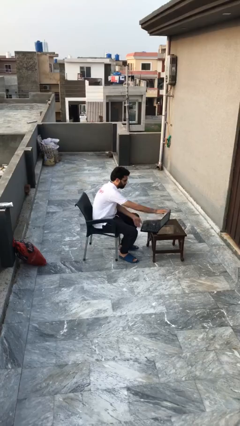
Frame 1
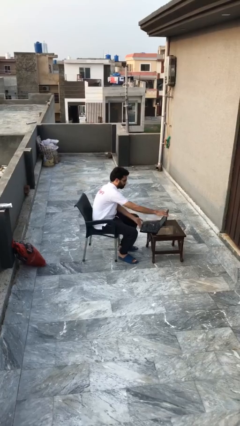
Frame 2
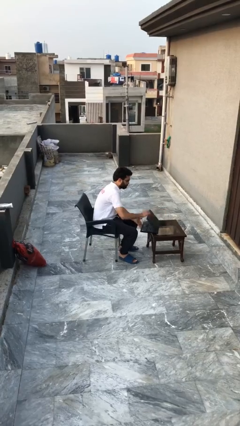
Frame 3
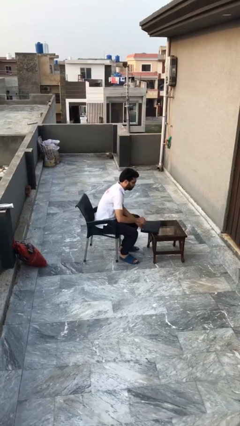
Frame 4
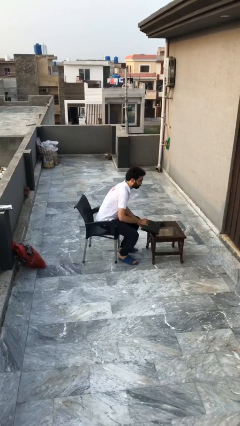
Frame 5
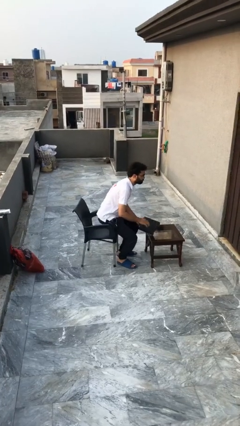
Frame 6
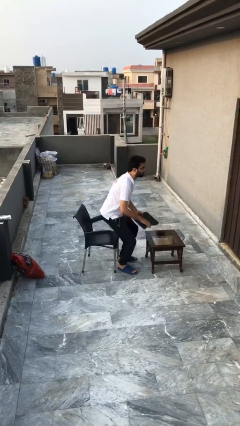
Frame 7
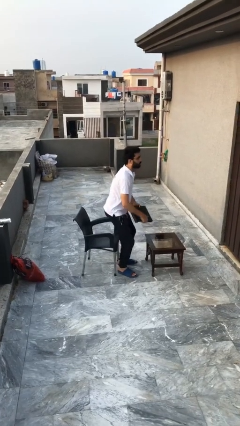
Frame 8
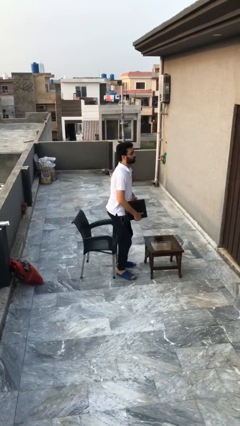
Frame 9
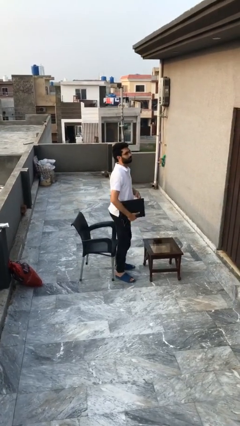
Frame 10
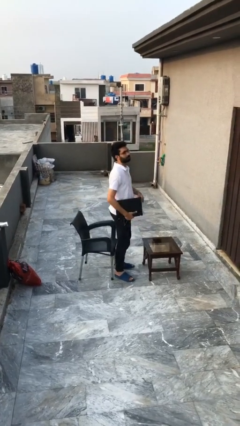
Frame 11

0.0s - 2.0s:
person stands up

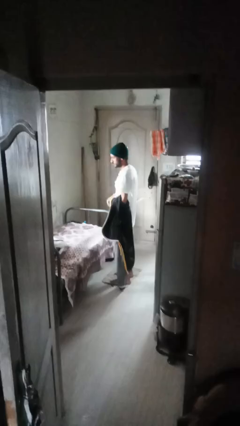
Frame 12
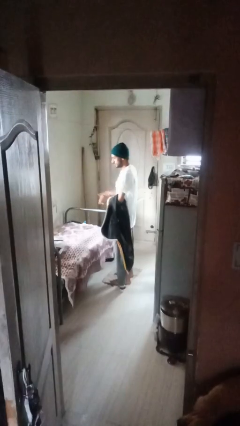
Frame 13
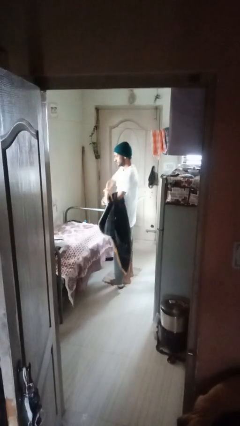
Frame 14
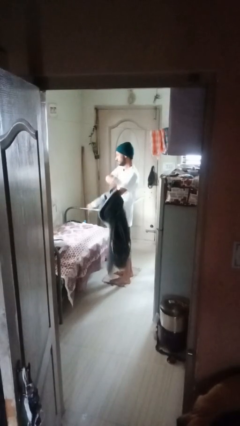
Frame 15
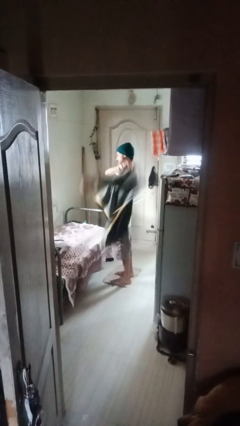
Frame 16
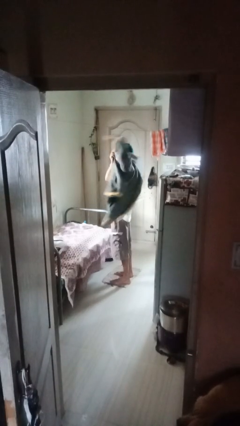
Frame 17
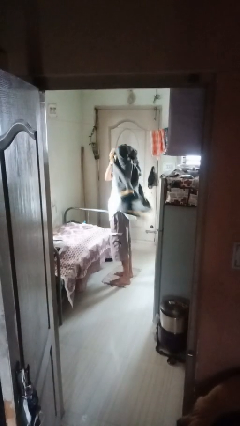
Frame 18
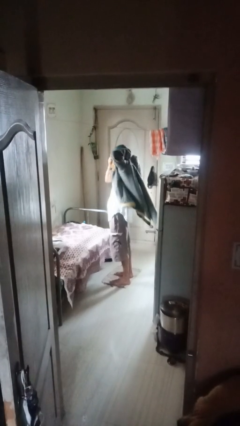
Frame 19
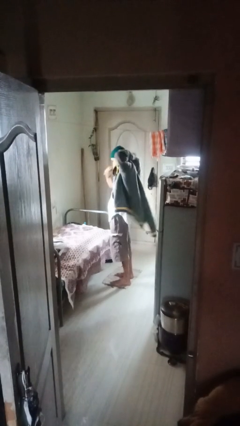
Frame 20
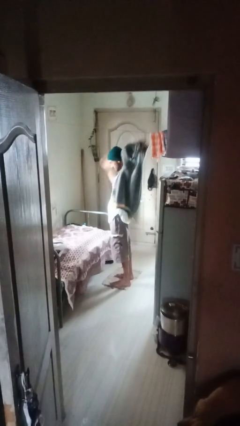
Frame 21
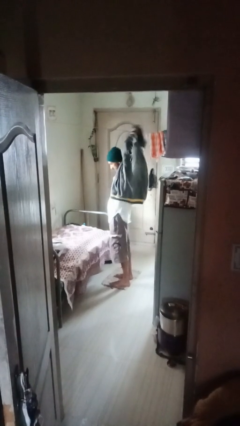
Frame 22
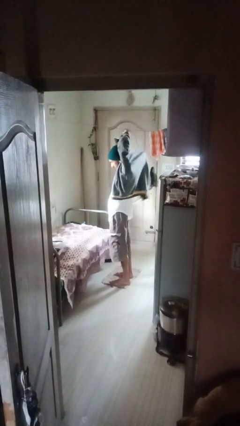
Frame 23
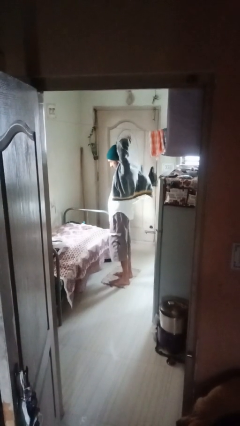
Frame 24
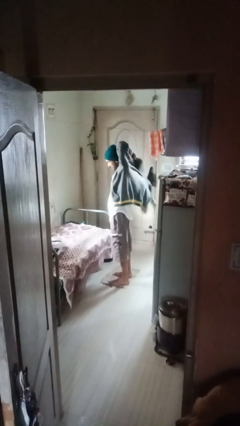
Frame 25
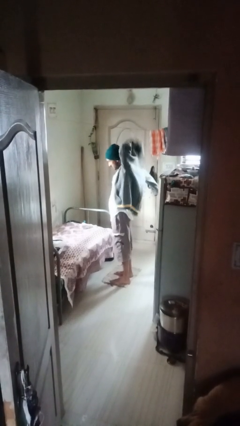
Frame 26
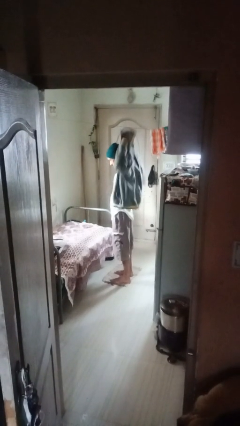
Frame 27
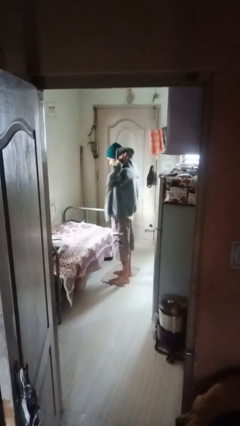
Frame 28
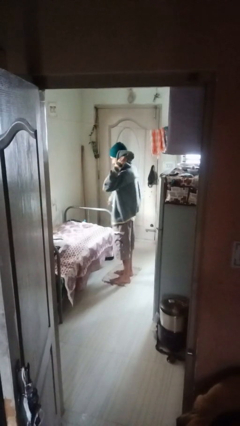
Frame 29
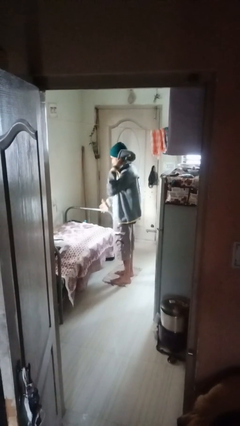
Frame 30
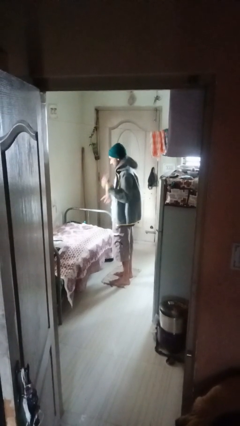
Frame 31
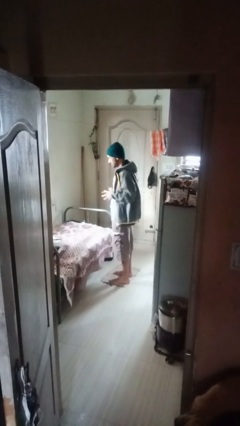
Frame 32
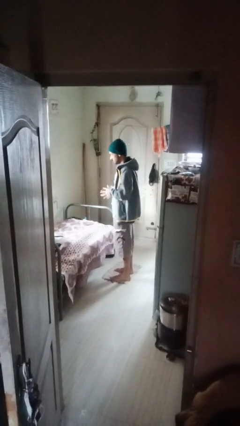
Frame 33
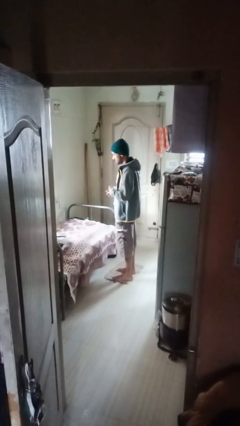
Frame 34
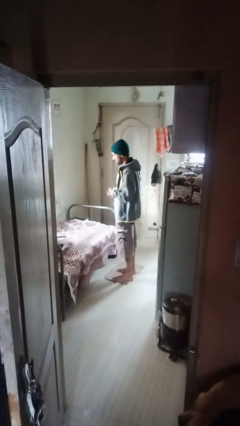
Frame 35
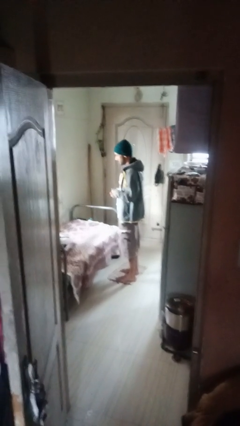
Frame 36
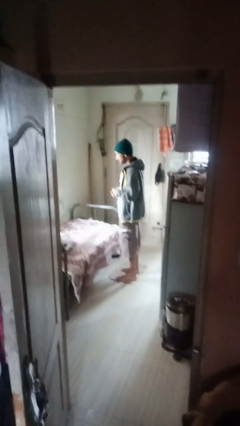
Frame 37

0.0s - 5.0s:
person puts on shirt

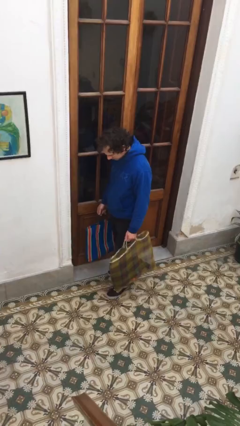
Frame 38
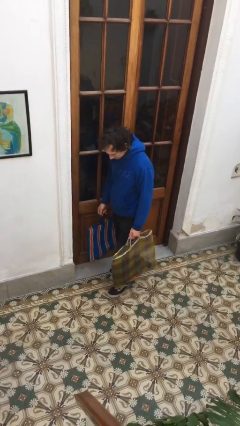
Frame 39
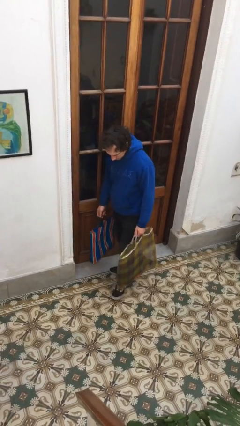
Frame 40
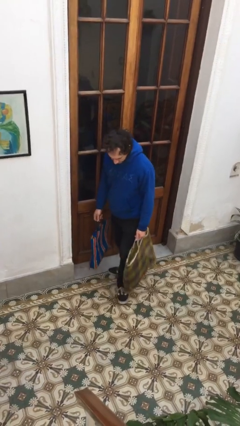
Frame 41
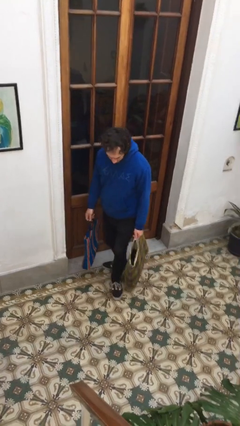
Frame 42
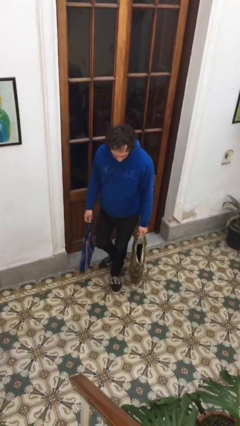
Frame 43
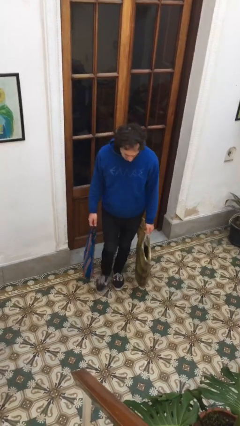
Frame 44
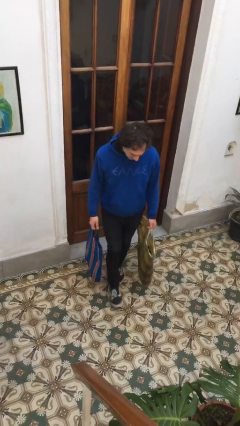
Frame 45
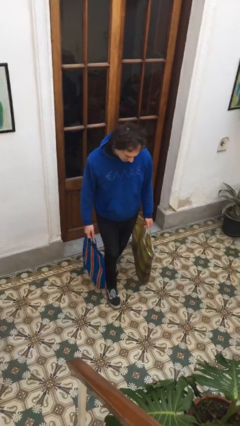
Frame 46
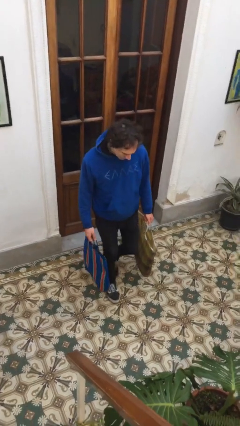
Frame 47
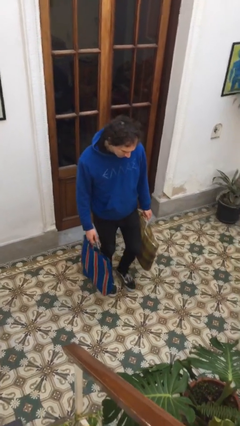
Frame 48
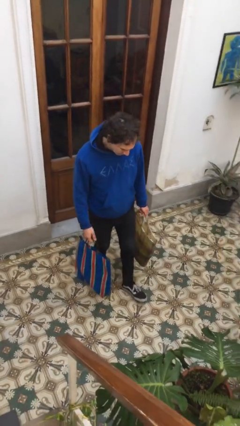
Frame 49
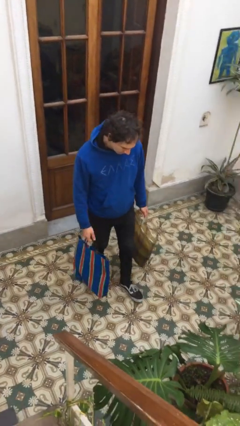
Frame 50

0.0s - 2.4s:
person carries groceries

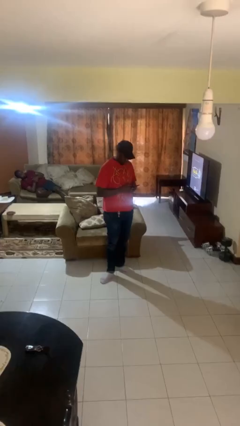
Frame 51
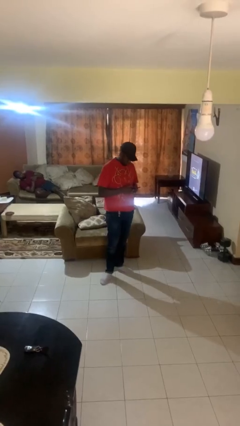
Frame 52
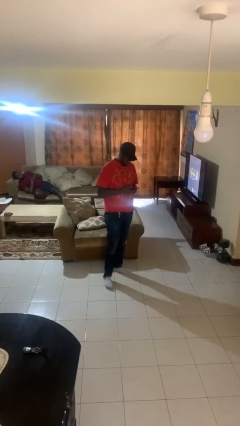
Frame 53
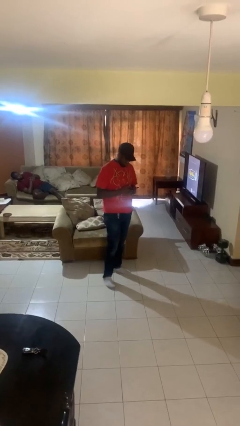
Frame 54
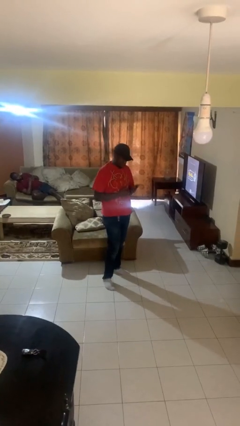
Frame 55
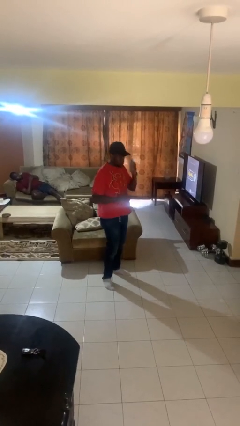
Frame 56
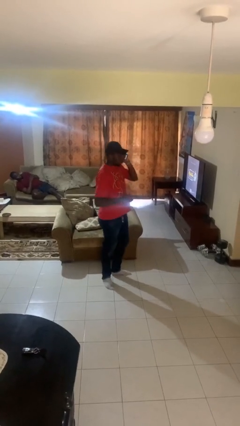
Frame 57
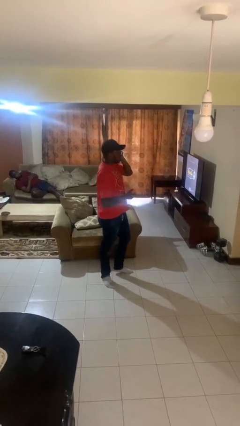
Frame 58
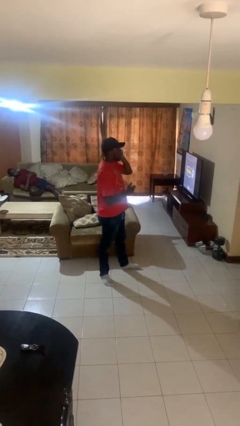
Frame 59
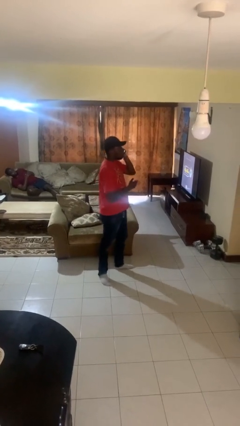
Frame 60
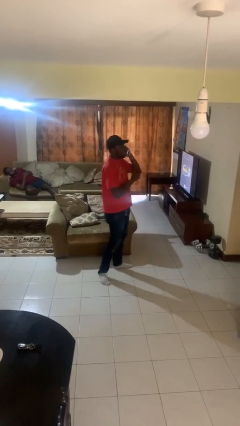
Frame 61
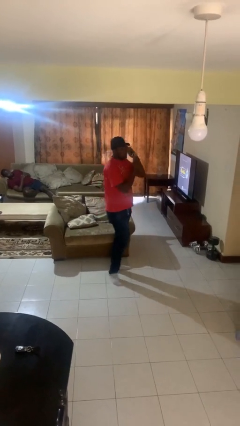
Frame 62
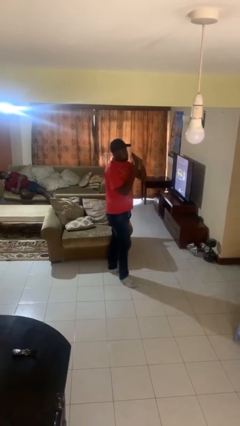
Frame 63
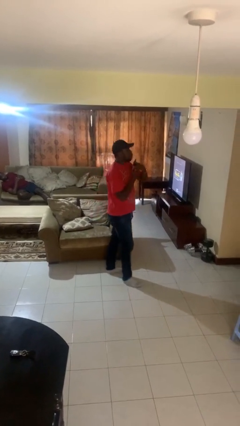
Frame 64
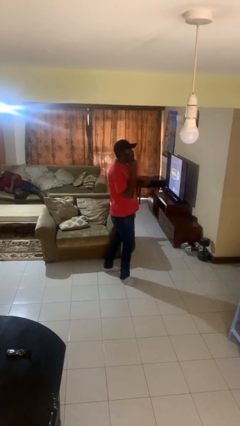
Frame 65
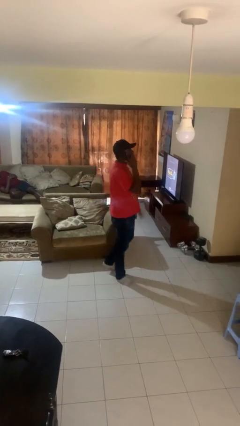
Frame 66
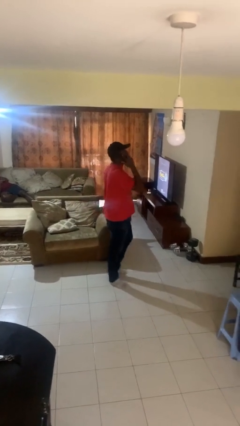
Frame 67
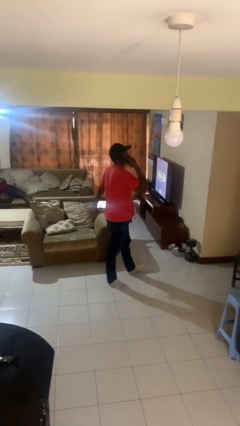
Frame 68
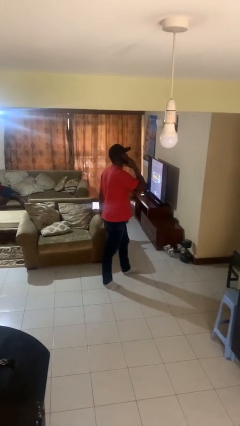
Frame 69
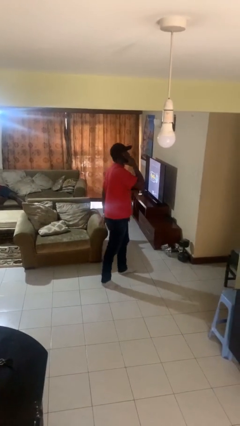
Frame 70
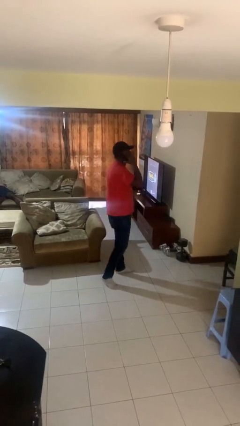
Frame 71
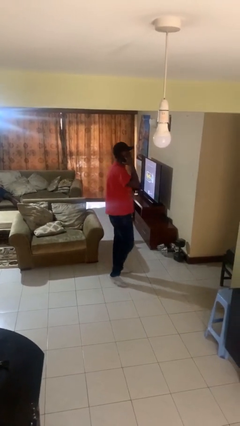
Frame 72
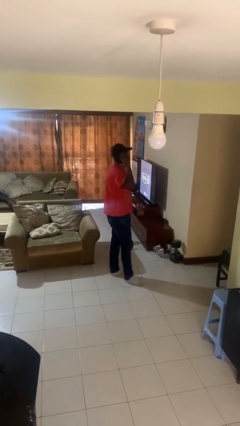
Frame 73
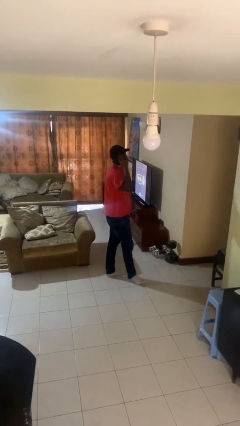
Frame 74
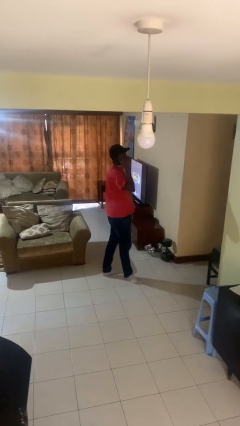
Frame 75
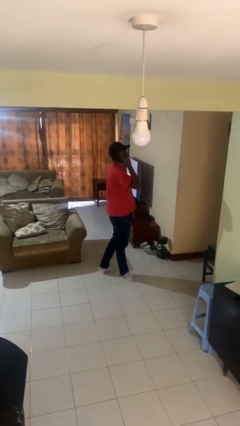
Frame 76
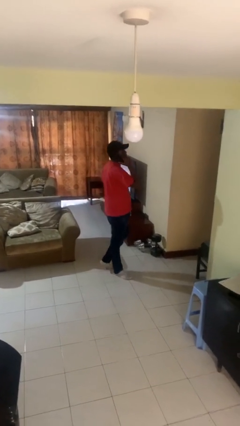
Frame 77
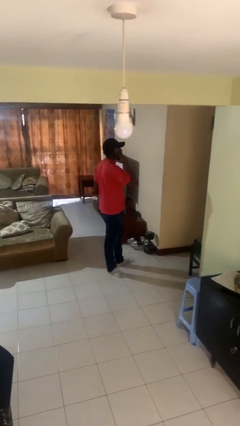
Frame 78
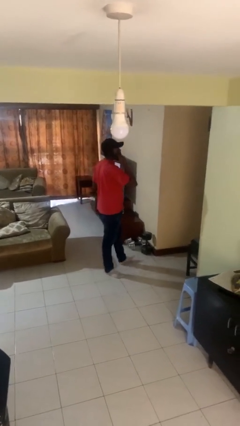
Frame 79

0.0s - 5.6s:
person talks on phone

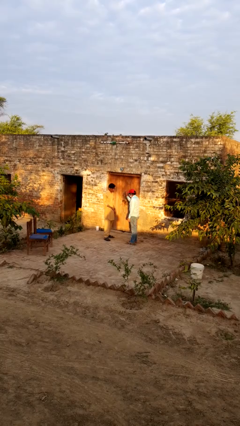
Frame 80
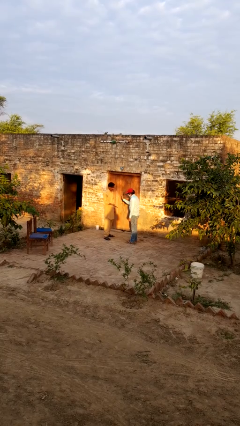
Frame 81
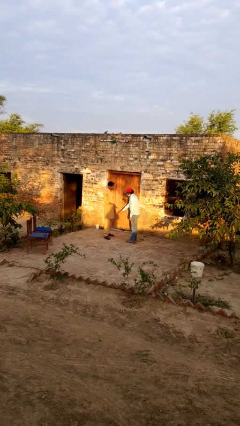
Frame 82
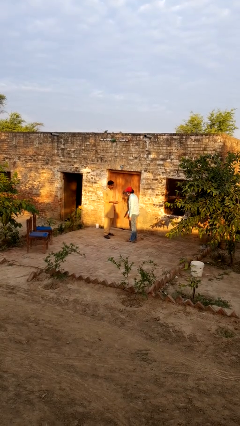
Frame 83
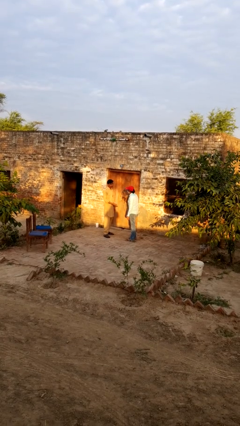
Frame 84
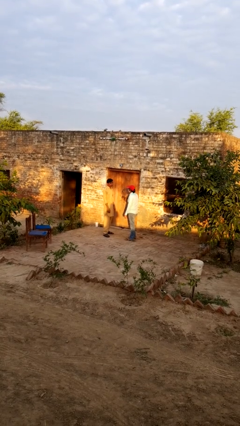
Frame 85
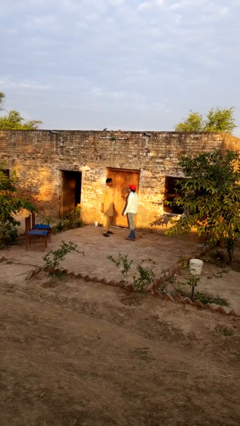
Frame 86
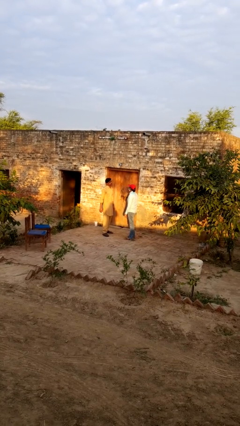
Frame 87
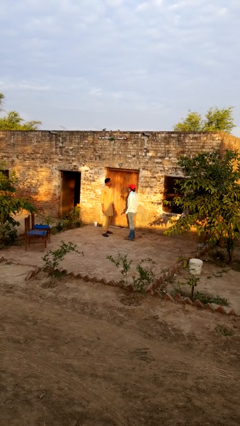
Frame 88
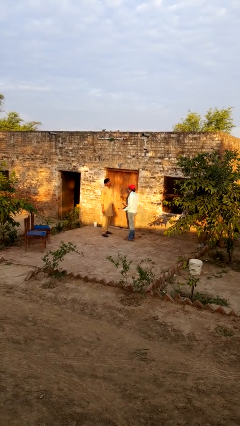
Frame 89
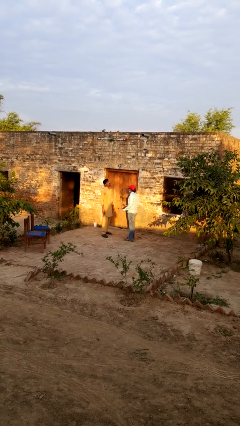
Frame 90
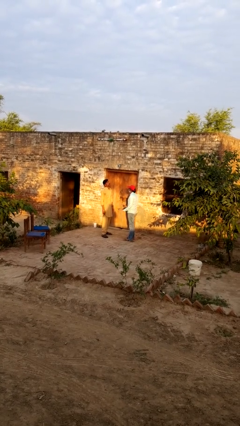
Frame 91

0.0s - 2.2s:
person highfives hand

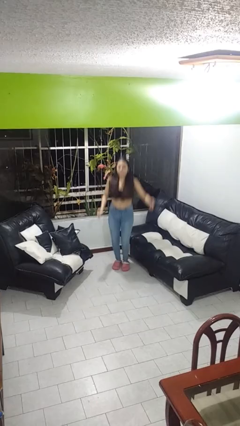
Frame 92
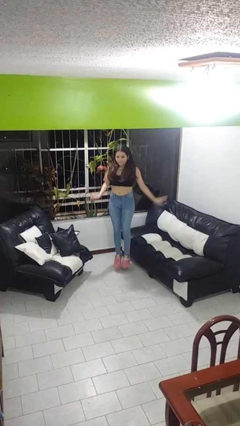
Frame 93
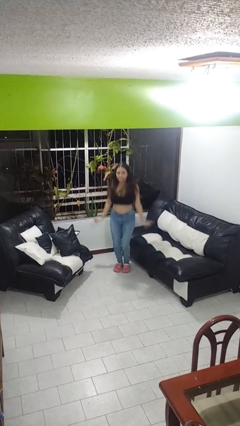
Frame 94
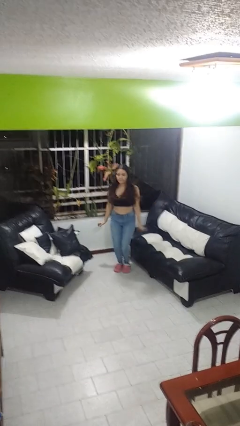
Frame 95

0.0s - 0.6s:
person jumps
